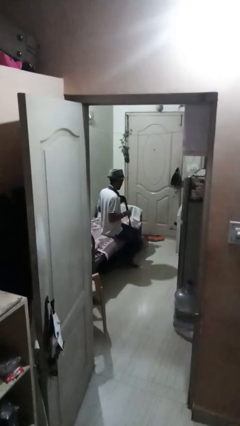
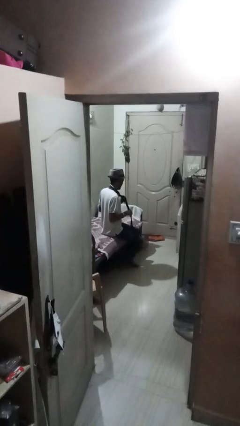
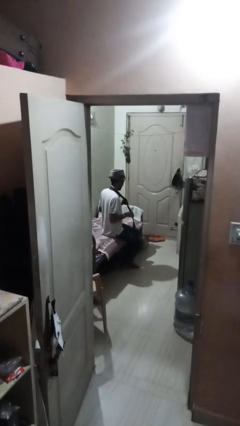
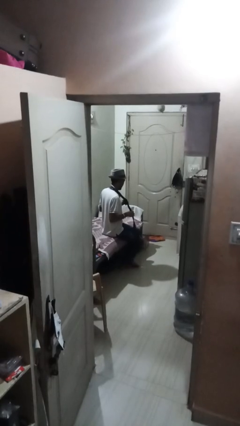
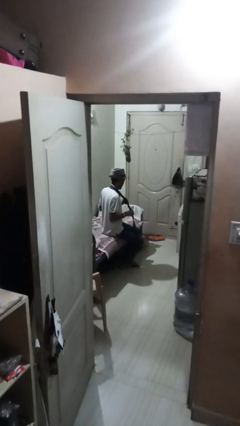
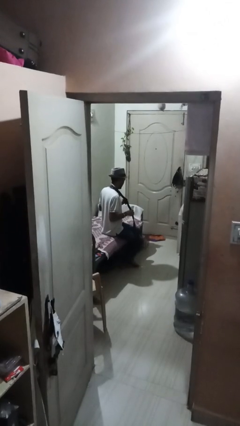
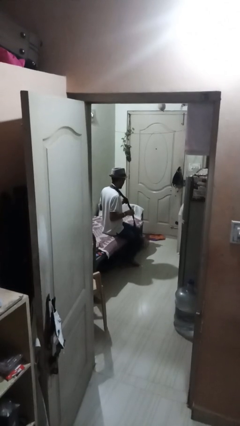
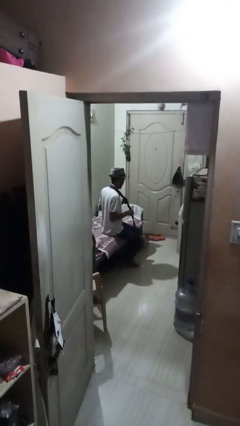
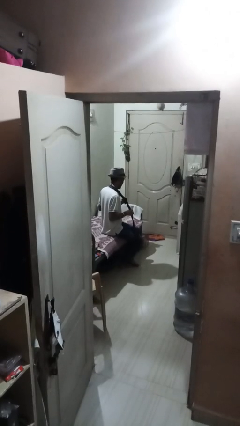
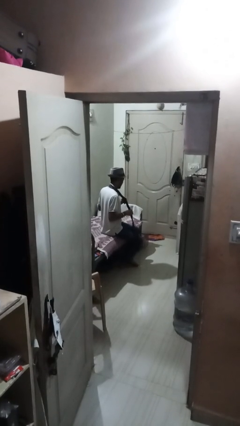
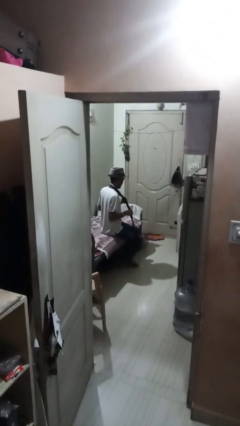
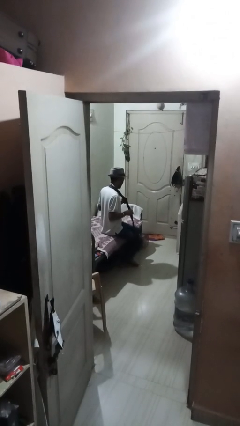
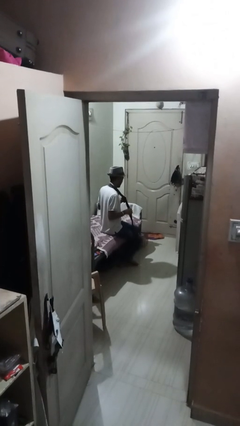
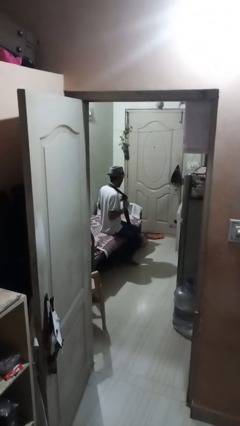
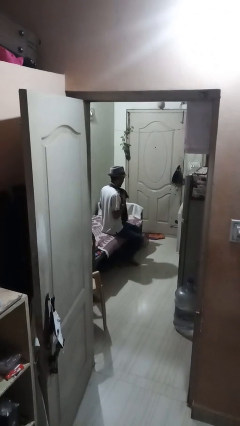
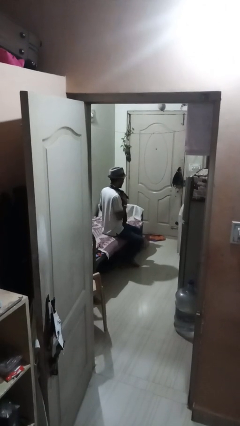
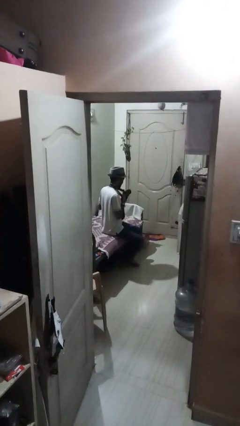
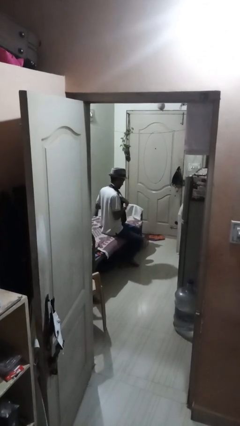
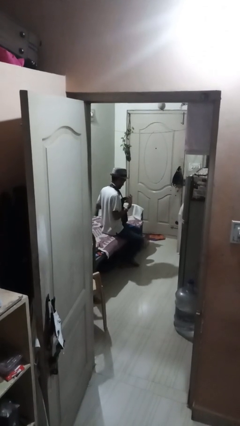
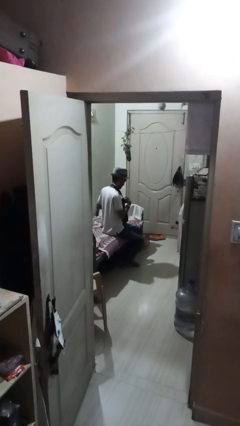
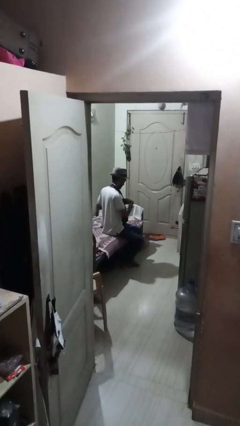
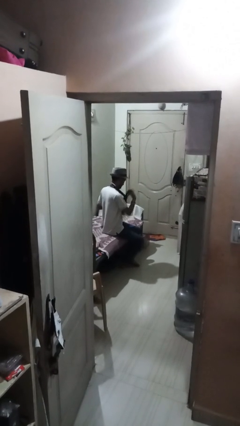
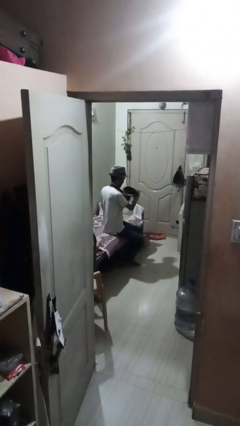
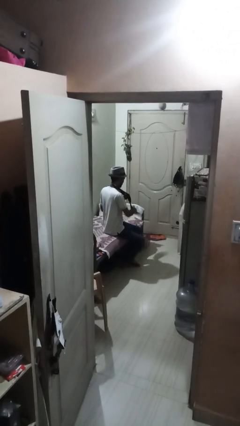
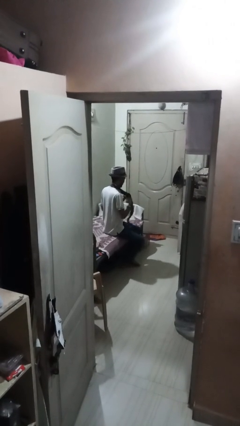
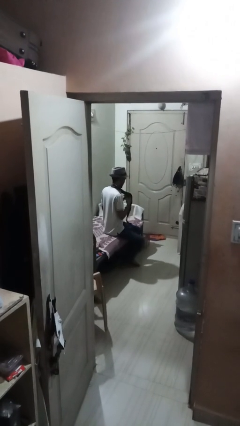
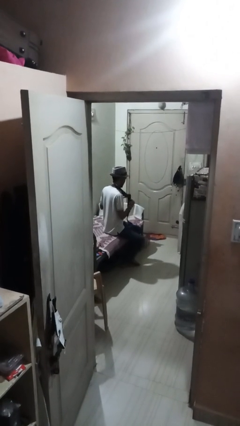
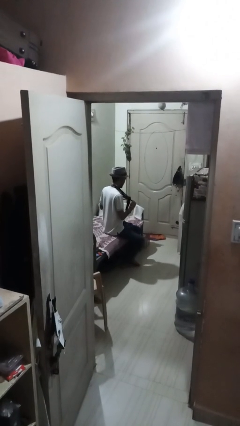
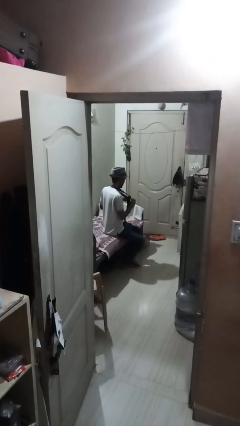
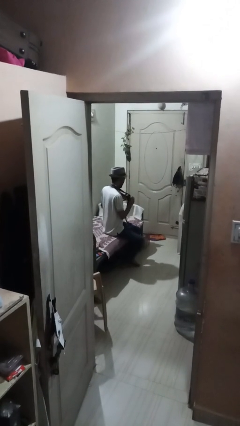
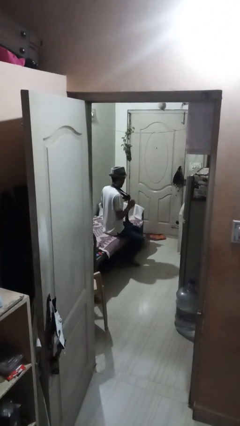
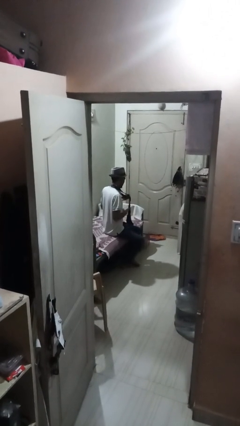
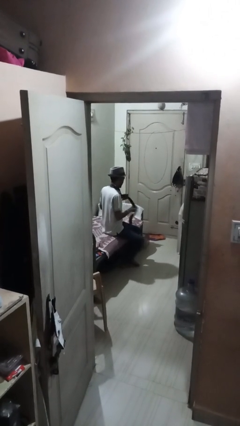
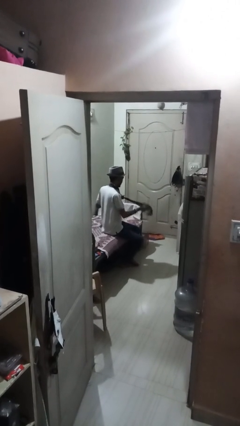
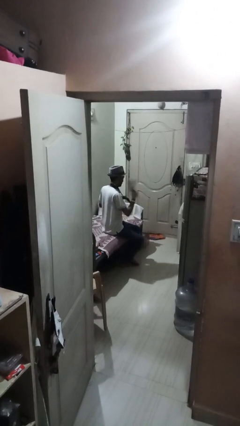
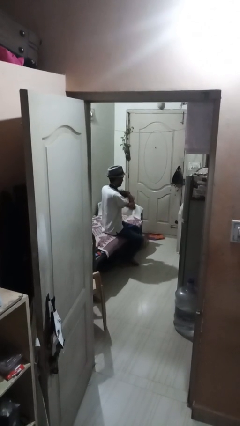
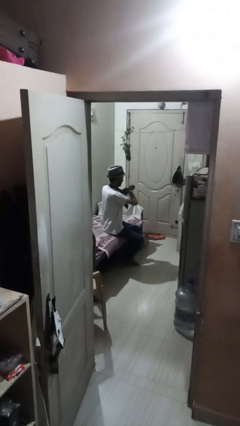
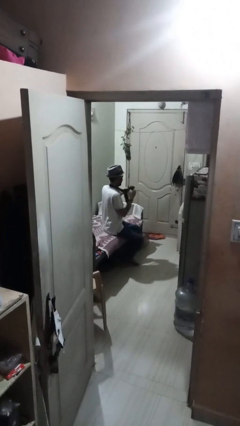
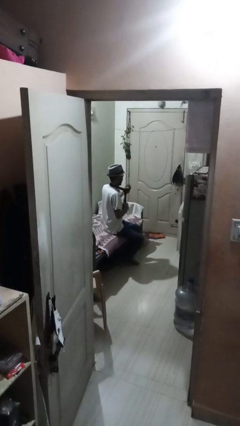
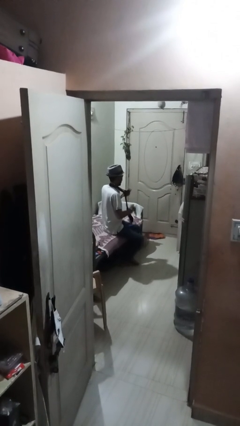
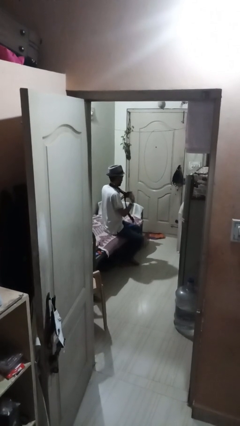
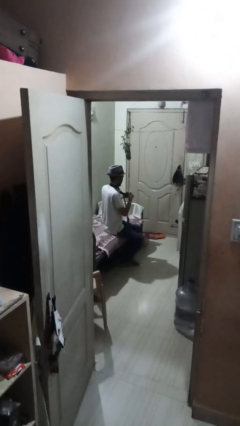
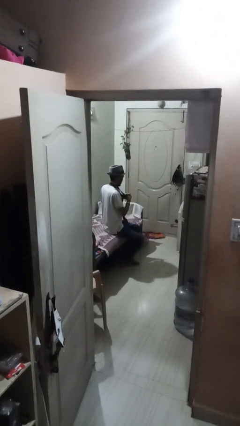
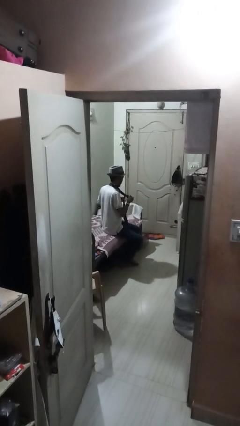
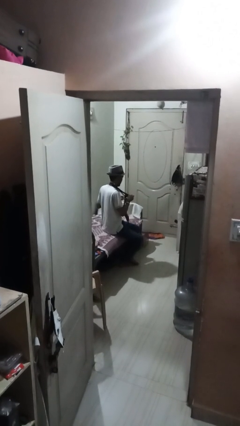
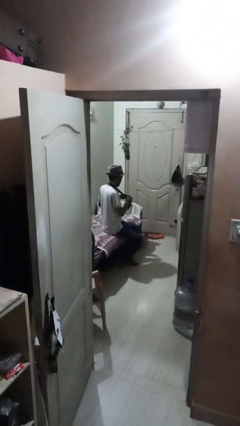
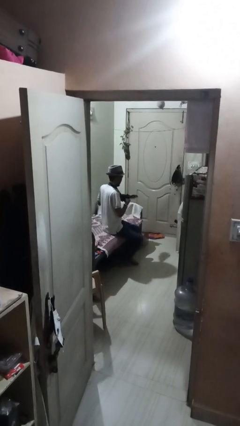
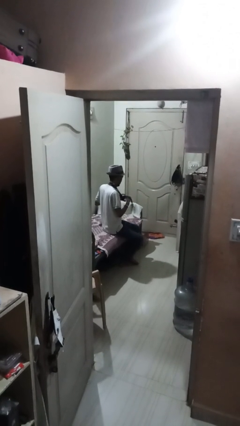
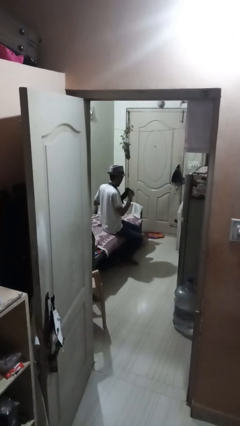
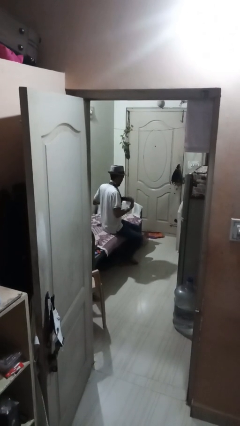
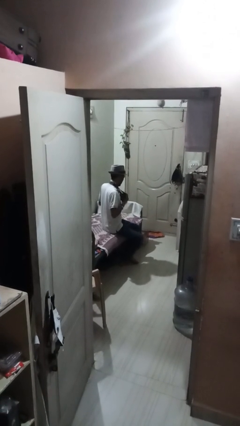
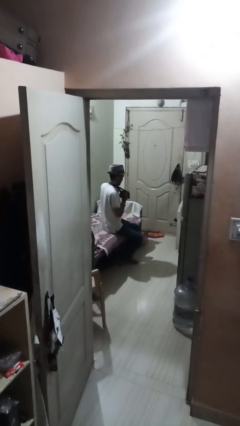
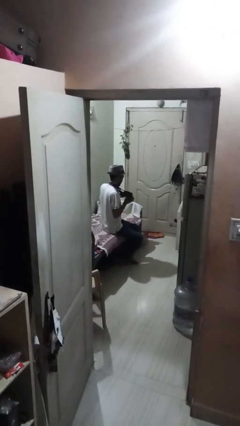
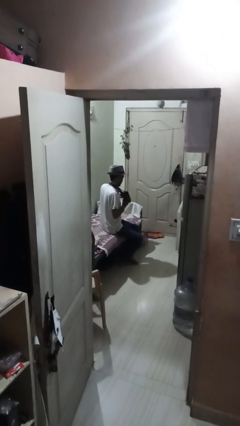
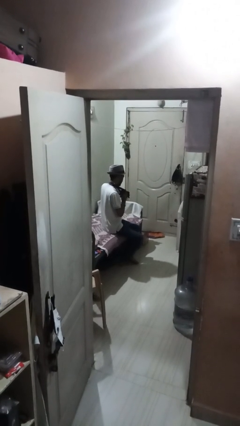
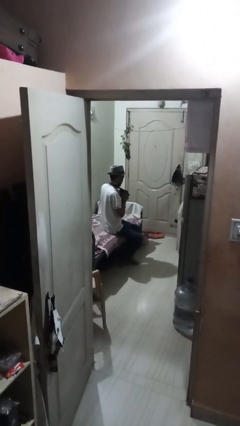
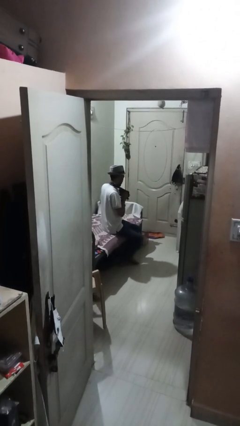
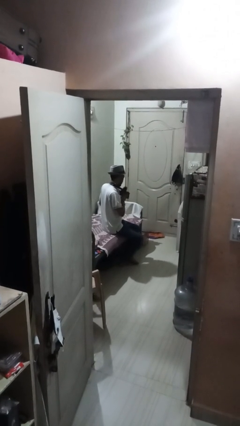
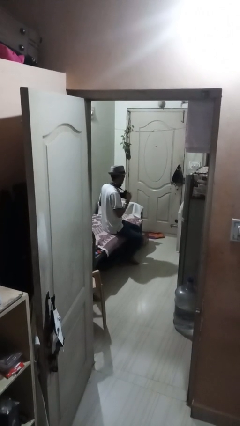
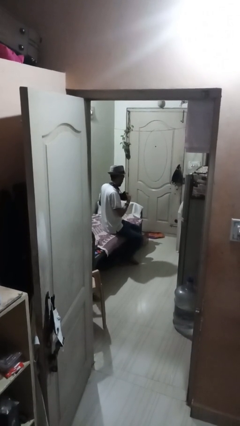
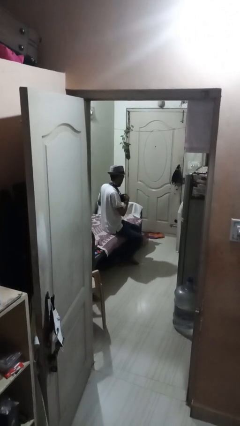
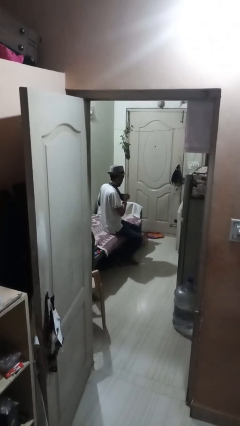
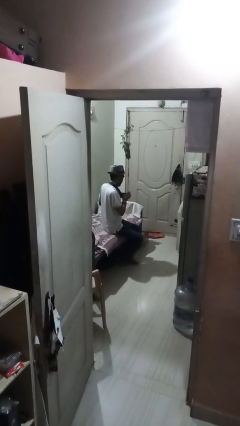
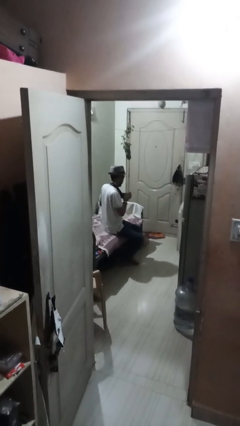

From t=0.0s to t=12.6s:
person puts on necktie

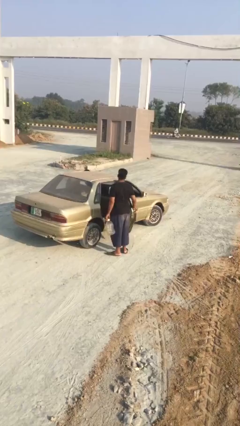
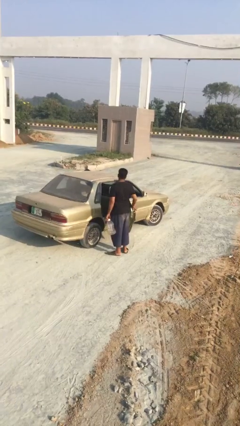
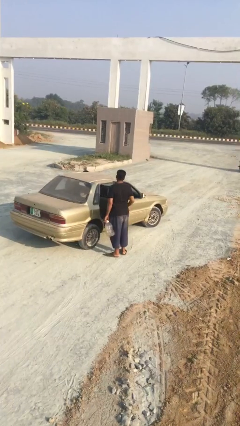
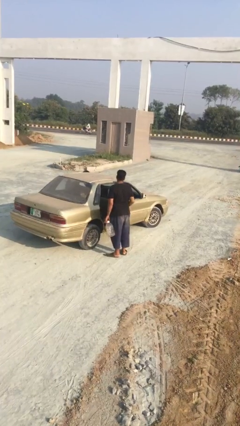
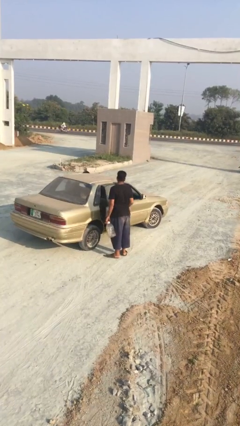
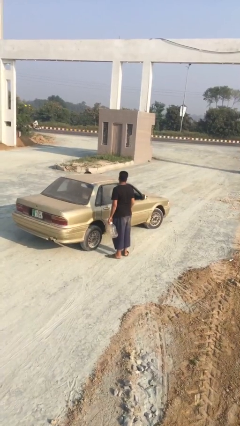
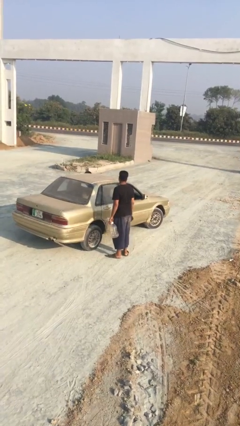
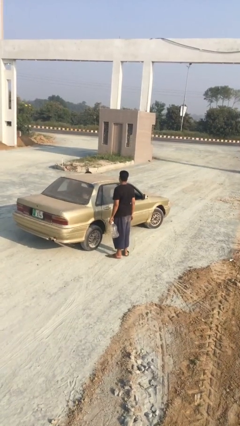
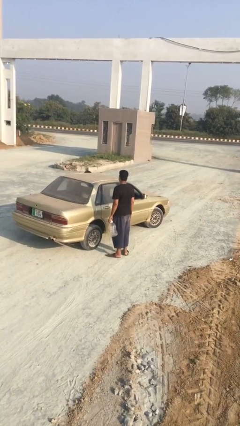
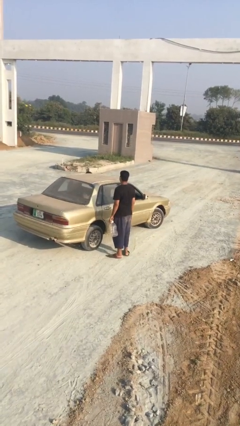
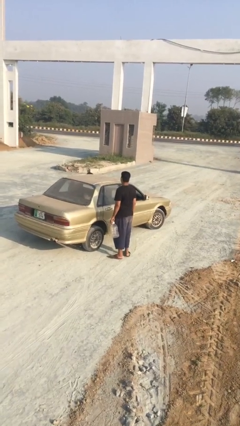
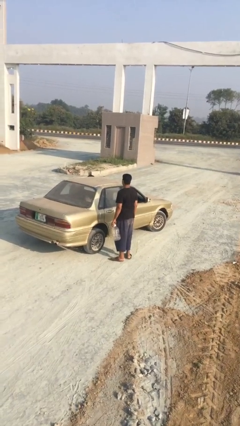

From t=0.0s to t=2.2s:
person closes car door

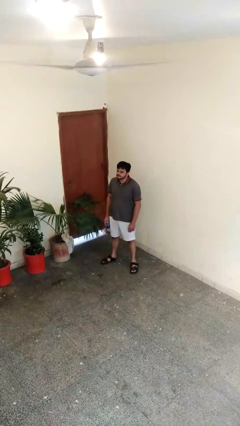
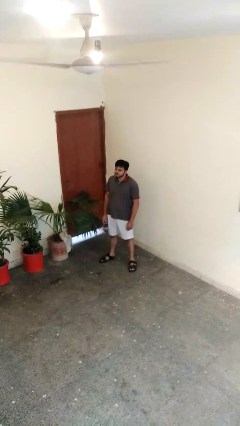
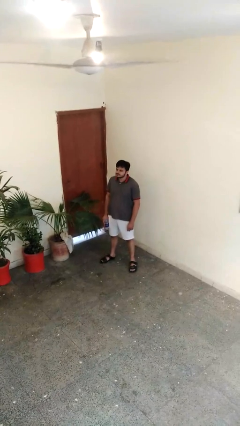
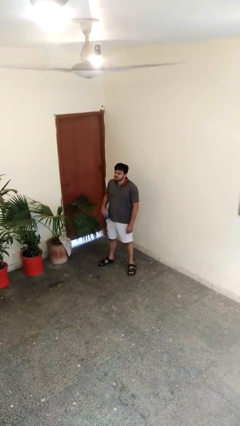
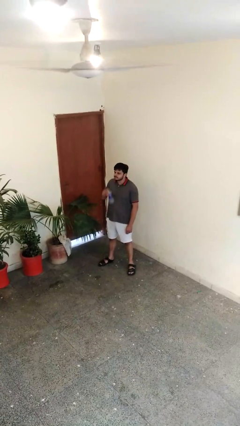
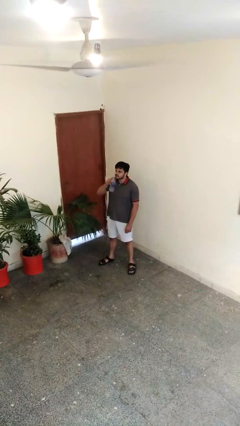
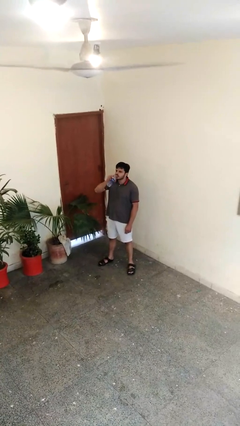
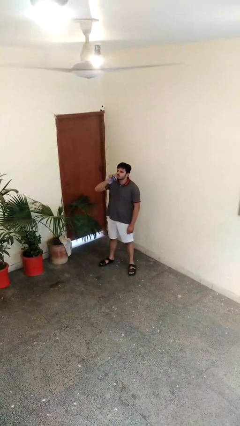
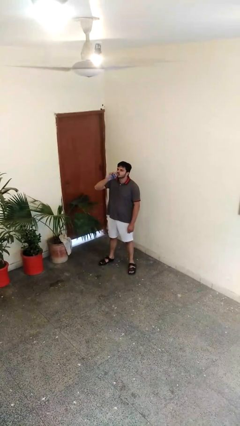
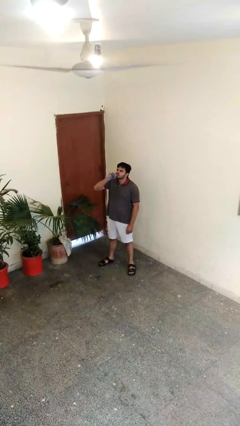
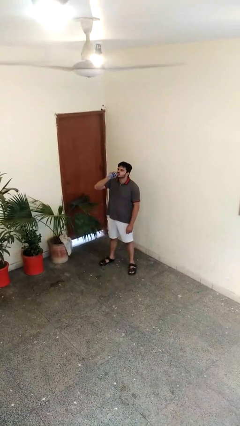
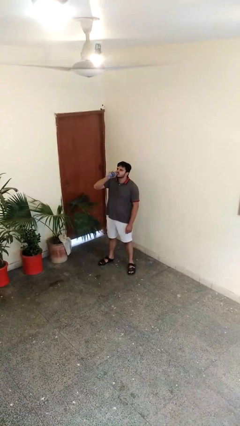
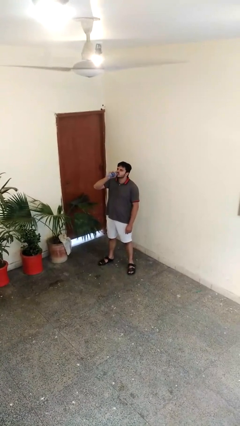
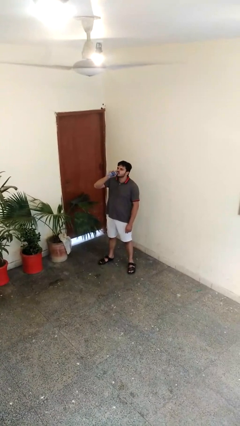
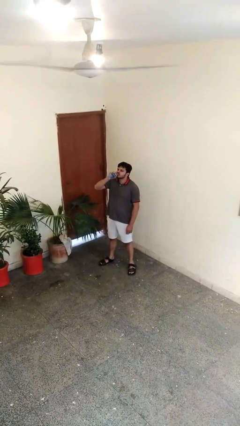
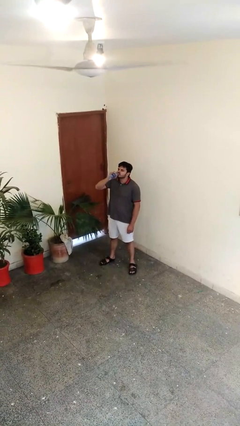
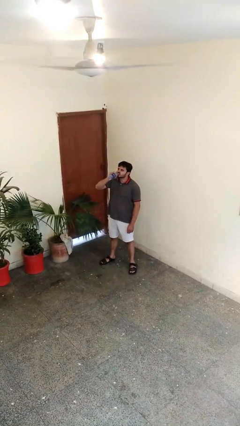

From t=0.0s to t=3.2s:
person drinks from bottle
